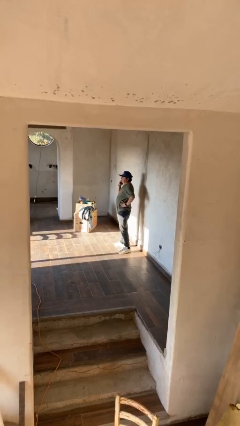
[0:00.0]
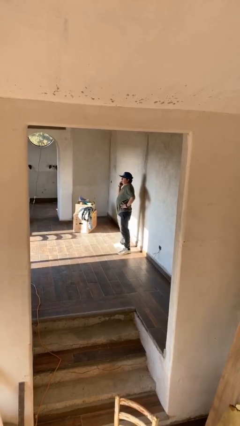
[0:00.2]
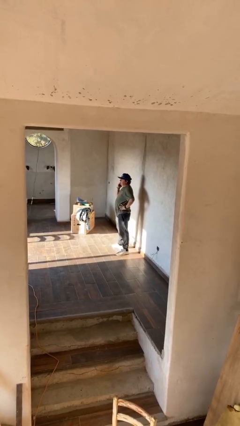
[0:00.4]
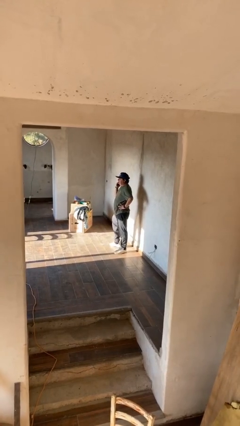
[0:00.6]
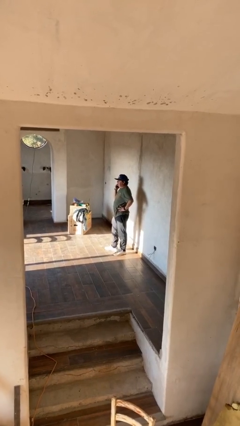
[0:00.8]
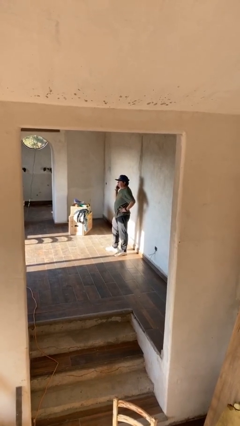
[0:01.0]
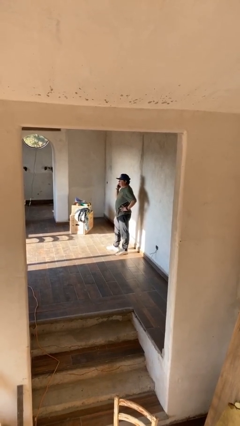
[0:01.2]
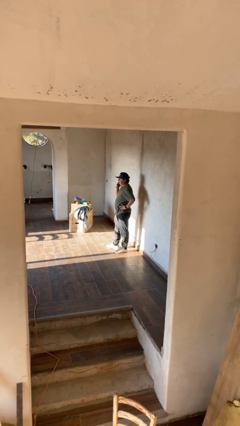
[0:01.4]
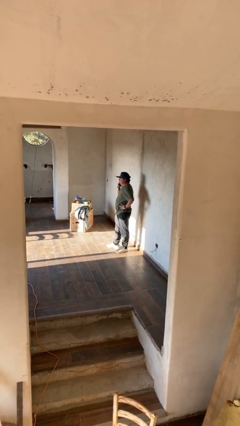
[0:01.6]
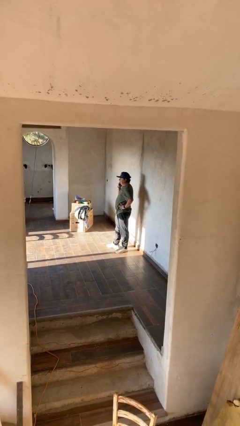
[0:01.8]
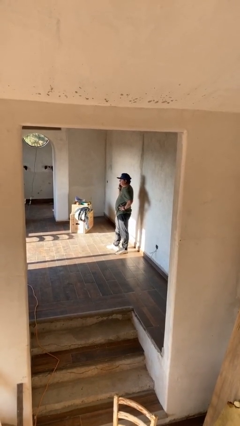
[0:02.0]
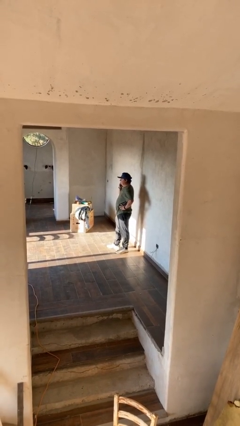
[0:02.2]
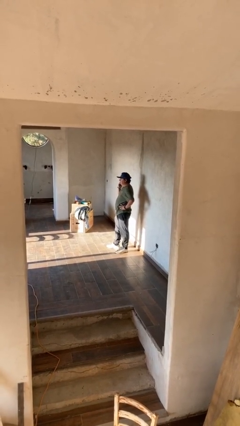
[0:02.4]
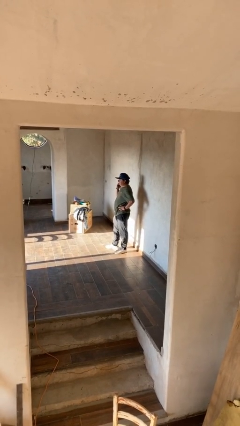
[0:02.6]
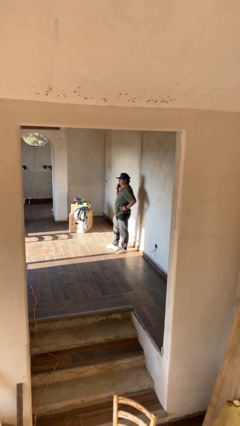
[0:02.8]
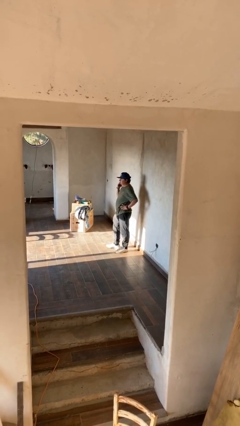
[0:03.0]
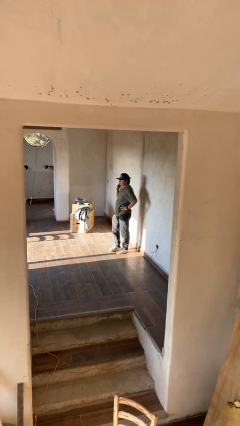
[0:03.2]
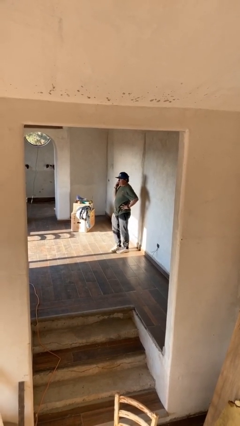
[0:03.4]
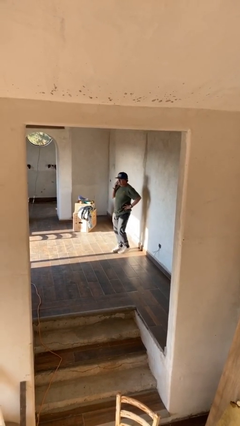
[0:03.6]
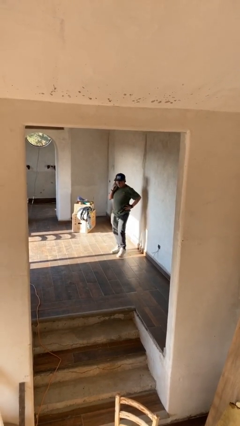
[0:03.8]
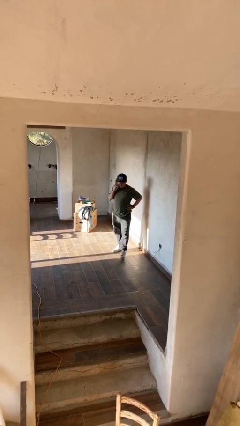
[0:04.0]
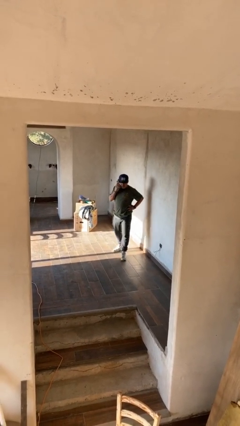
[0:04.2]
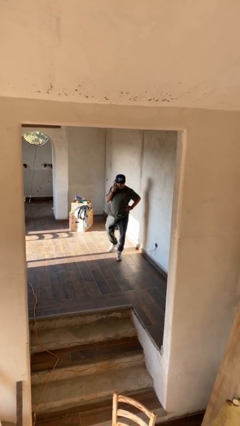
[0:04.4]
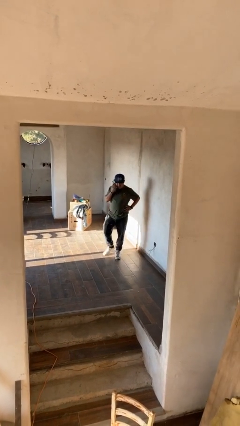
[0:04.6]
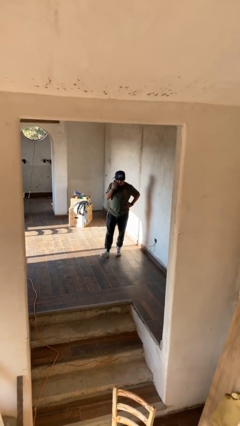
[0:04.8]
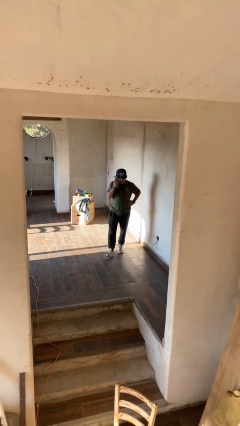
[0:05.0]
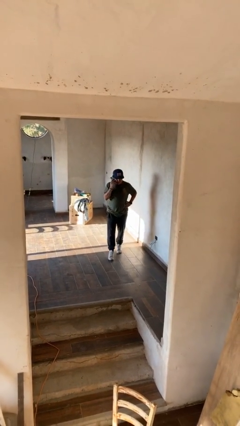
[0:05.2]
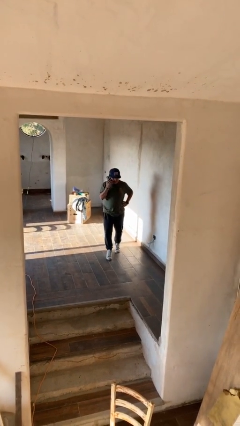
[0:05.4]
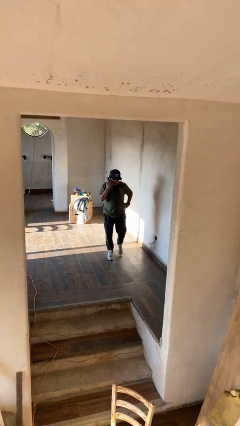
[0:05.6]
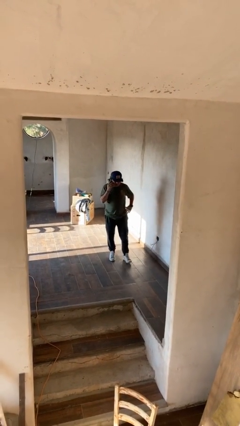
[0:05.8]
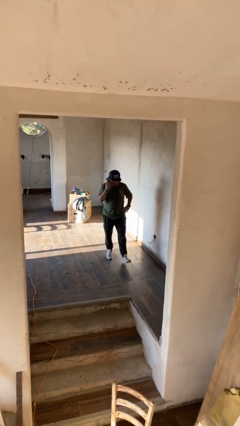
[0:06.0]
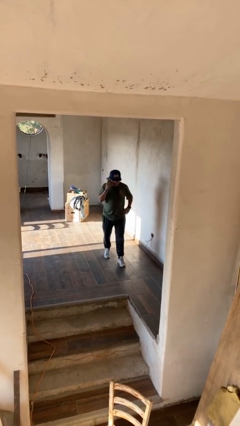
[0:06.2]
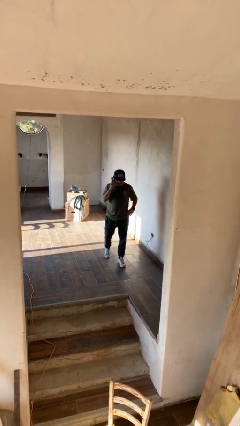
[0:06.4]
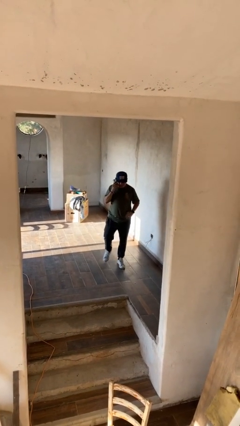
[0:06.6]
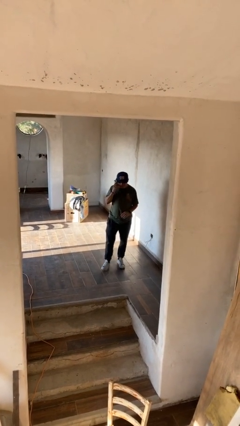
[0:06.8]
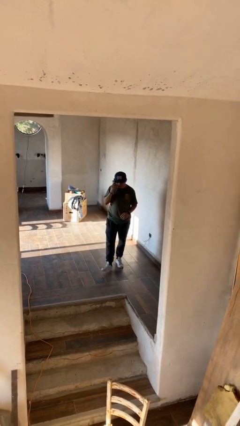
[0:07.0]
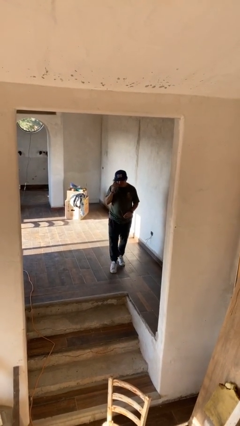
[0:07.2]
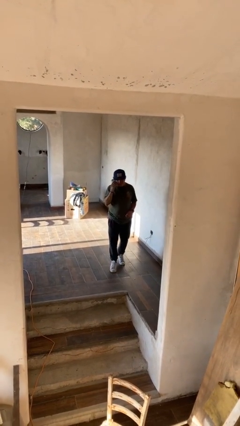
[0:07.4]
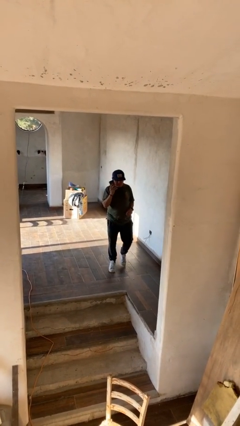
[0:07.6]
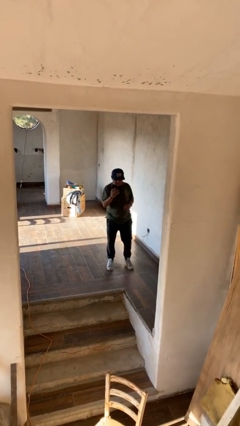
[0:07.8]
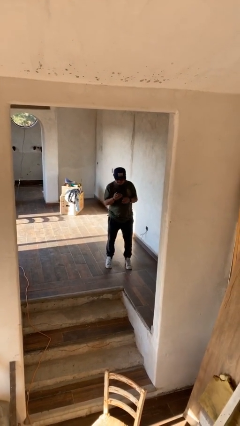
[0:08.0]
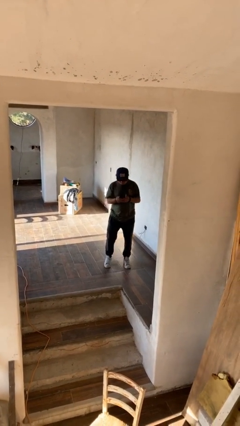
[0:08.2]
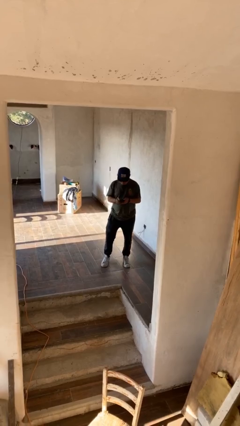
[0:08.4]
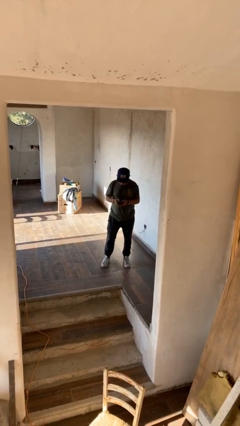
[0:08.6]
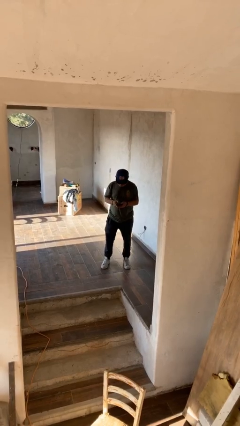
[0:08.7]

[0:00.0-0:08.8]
person talks on phone

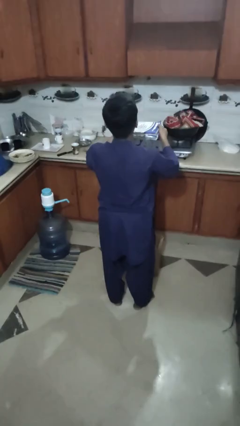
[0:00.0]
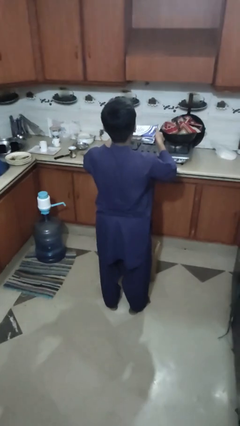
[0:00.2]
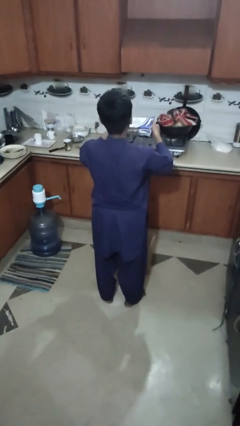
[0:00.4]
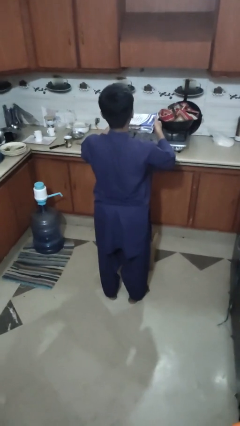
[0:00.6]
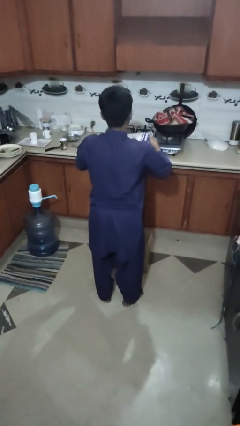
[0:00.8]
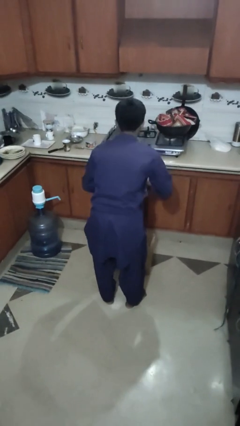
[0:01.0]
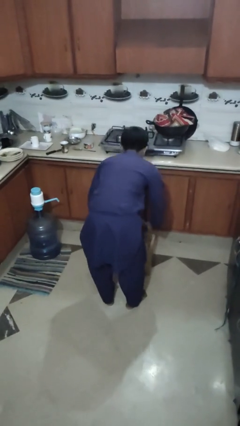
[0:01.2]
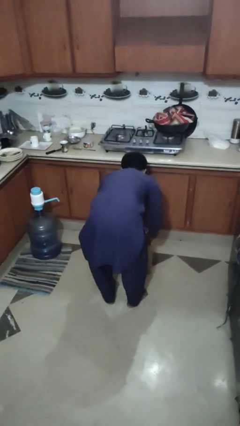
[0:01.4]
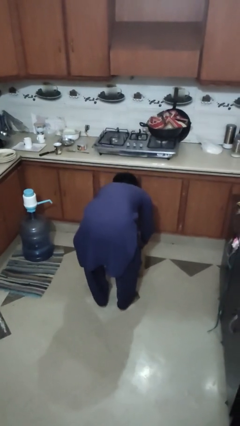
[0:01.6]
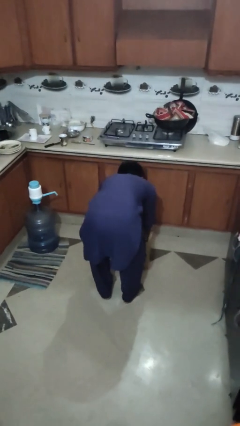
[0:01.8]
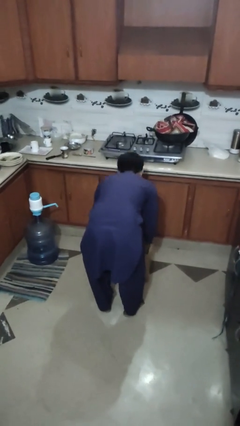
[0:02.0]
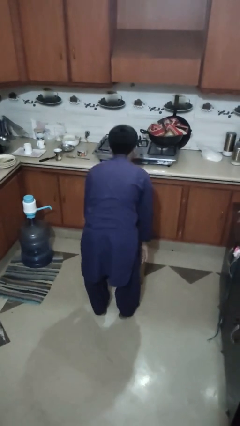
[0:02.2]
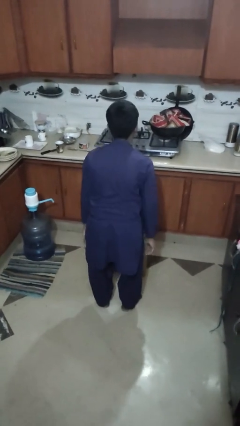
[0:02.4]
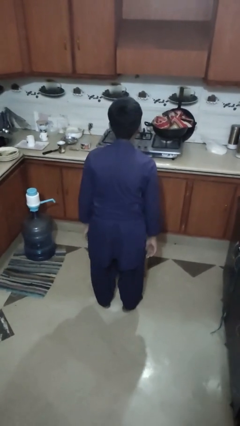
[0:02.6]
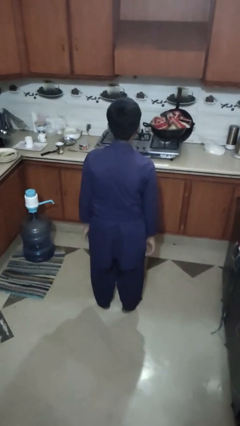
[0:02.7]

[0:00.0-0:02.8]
person puts object into box

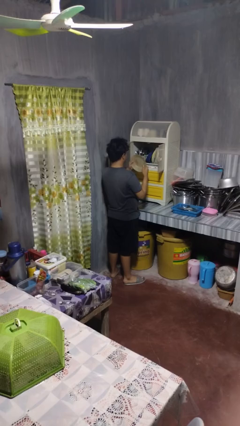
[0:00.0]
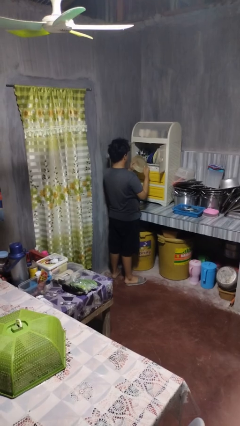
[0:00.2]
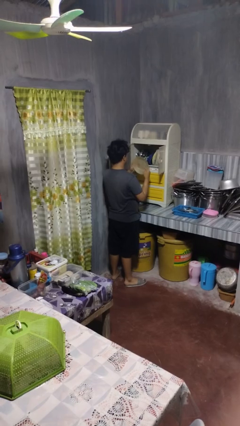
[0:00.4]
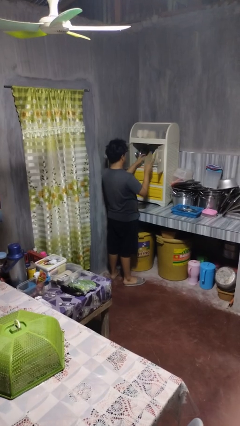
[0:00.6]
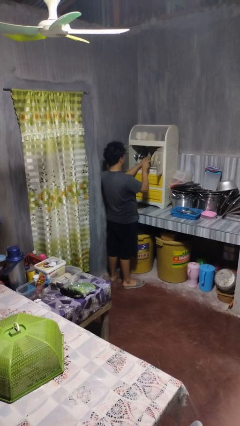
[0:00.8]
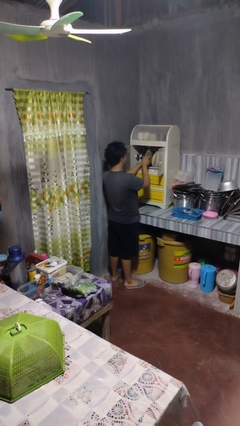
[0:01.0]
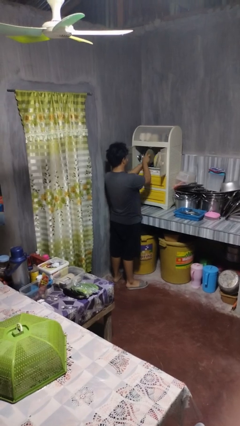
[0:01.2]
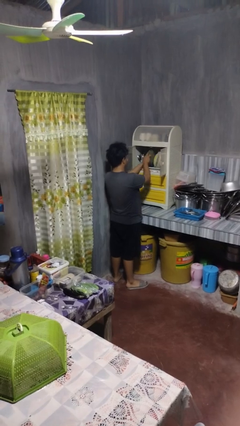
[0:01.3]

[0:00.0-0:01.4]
person puts down object into cabinet

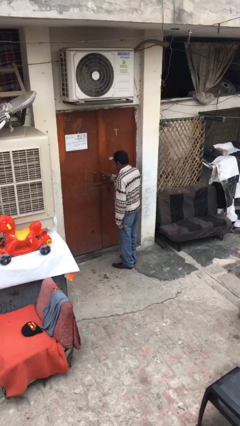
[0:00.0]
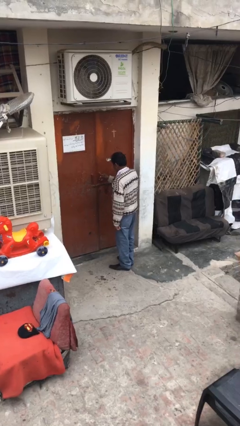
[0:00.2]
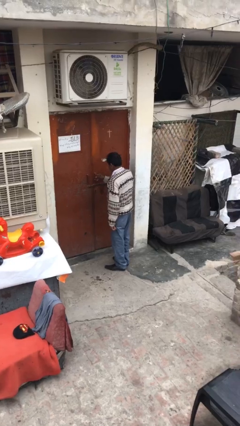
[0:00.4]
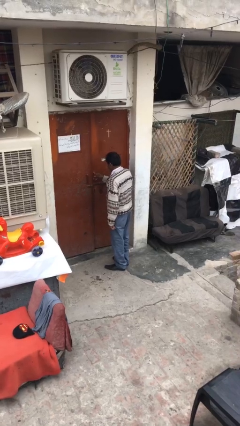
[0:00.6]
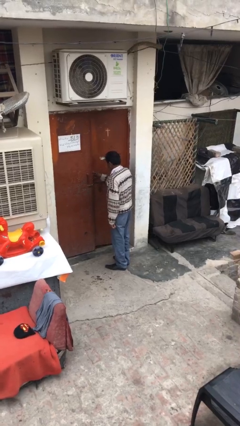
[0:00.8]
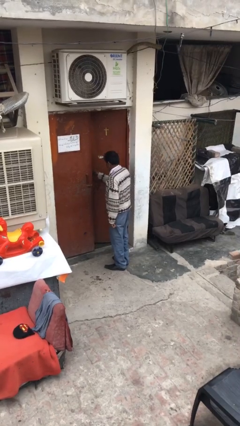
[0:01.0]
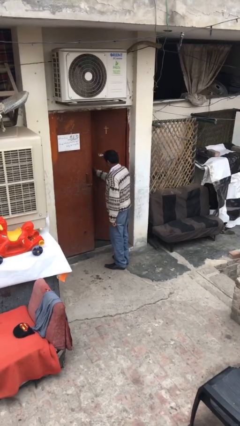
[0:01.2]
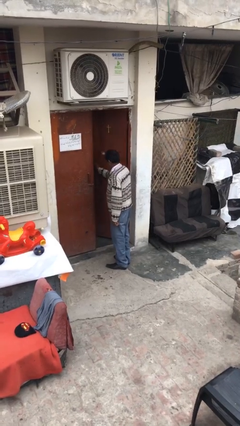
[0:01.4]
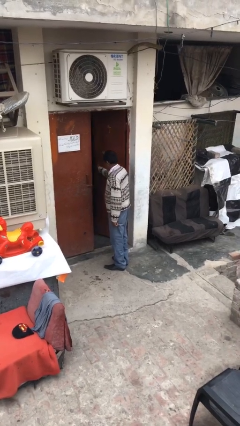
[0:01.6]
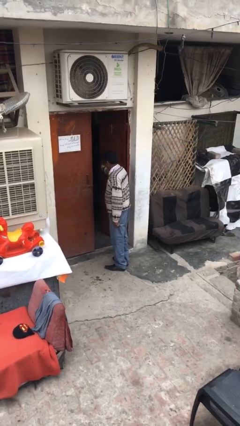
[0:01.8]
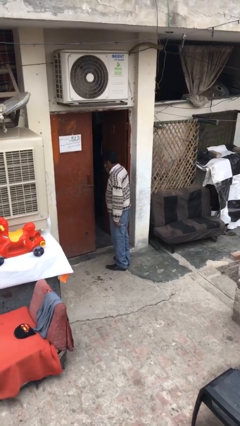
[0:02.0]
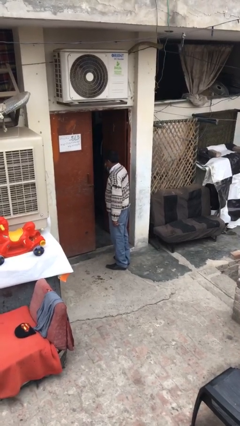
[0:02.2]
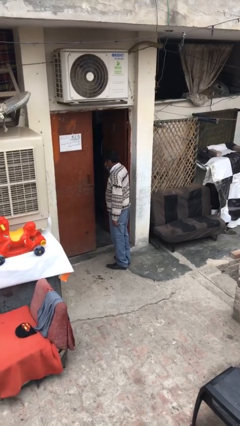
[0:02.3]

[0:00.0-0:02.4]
person opens facility door

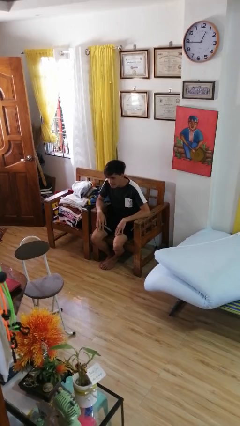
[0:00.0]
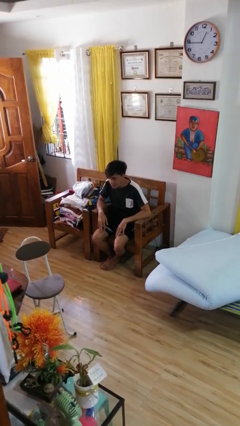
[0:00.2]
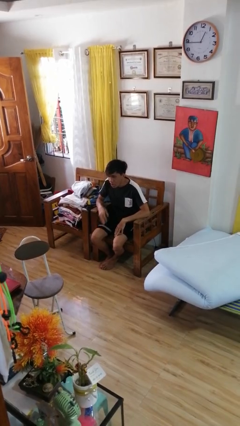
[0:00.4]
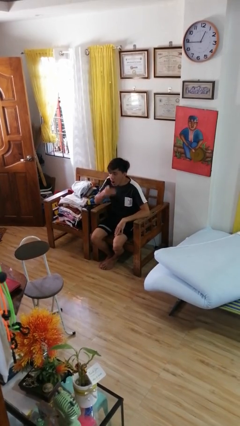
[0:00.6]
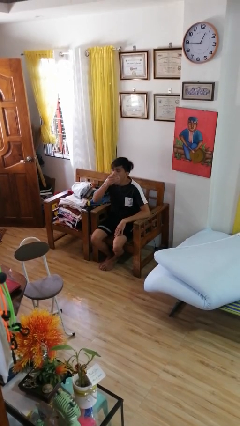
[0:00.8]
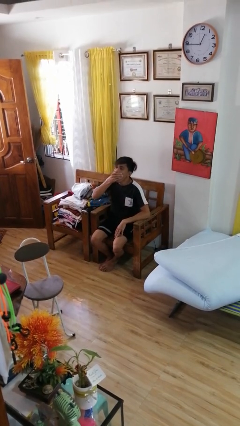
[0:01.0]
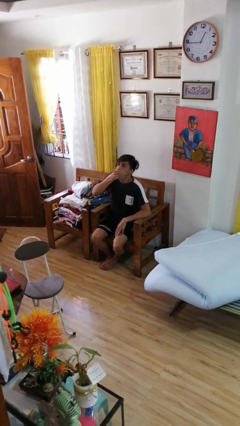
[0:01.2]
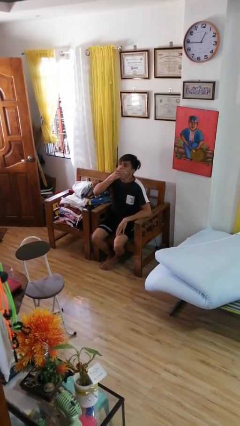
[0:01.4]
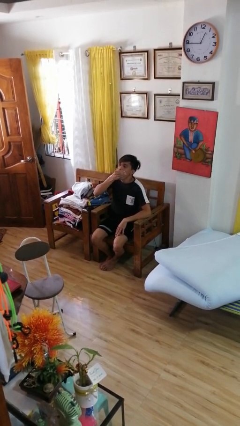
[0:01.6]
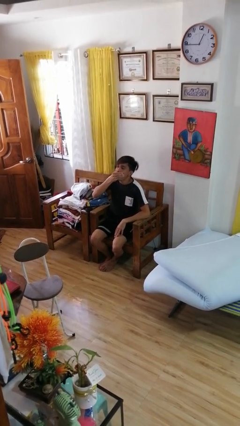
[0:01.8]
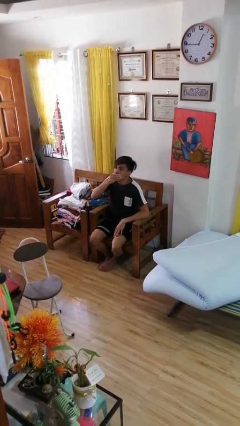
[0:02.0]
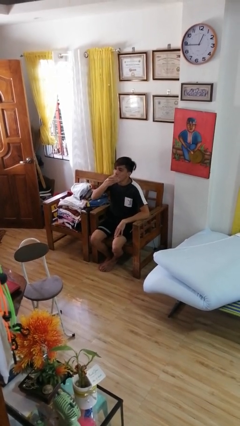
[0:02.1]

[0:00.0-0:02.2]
person yawns
